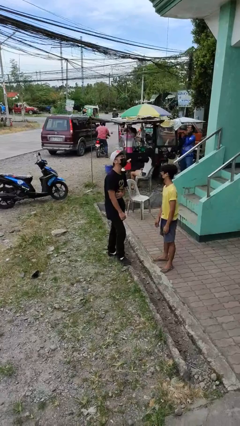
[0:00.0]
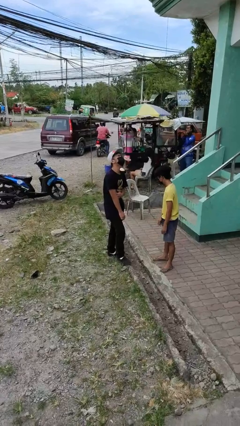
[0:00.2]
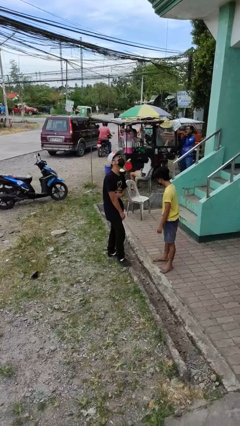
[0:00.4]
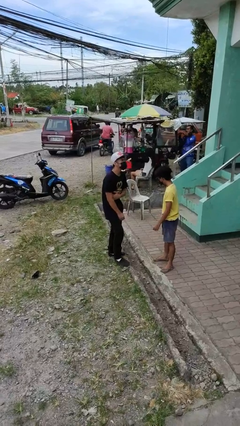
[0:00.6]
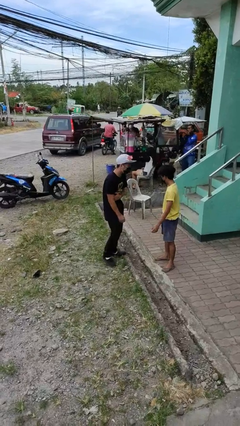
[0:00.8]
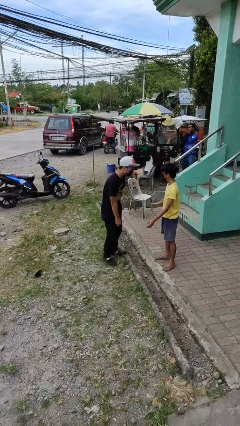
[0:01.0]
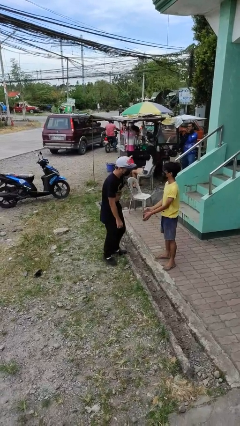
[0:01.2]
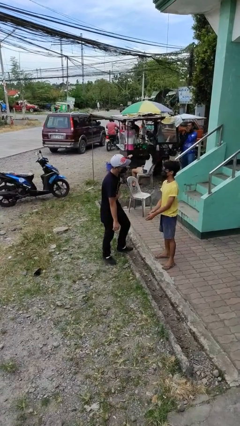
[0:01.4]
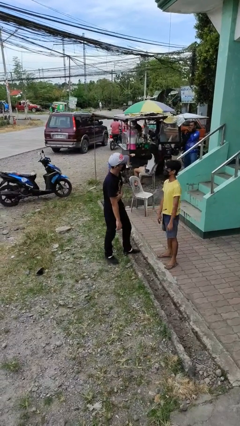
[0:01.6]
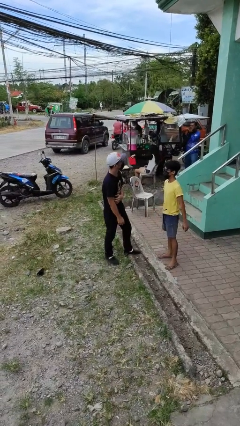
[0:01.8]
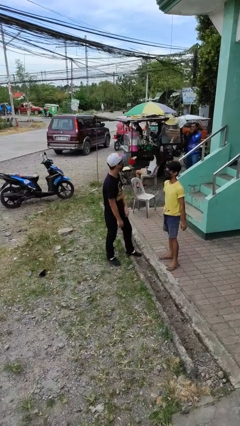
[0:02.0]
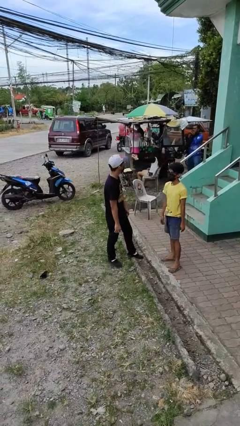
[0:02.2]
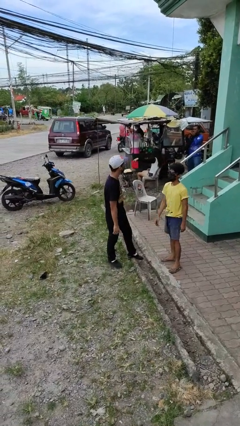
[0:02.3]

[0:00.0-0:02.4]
person laughs with person

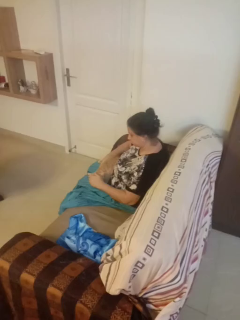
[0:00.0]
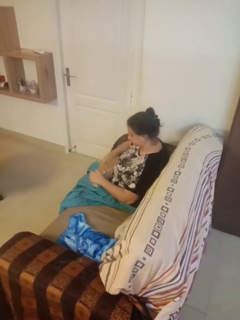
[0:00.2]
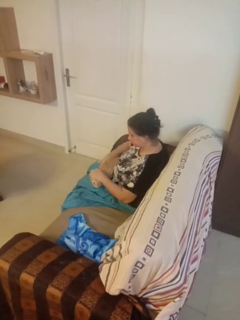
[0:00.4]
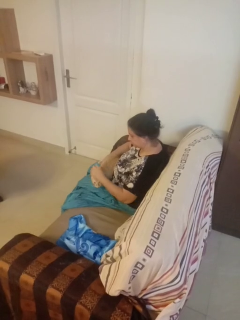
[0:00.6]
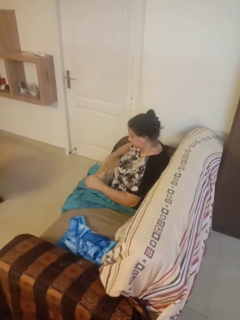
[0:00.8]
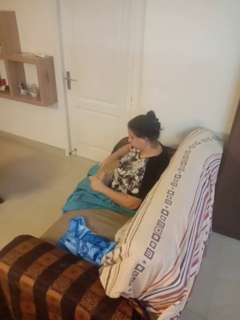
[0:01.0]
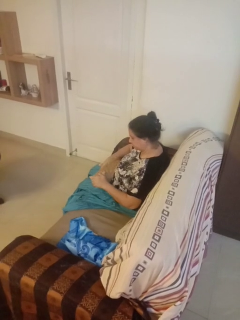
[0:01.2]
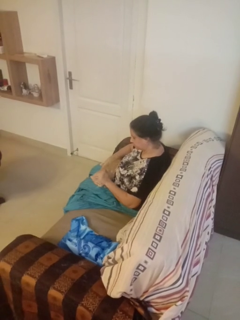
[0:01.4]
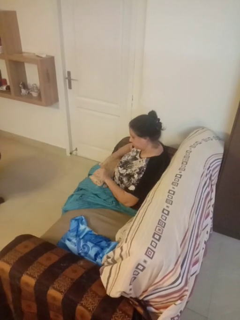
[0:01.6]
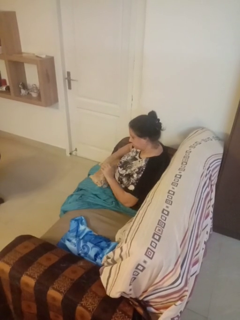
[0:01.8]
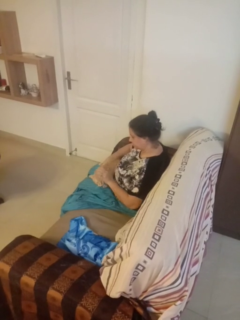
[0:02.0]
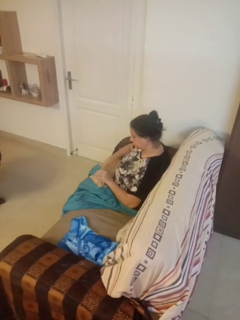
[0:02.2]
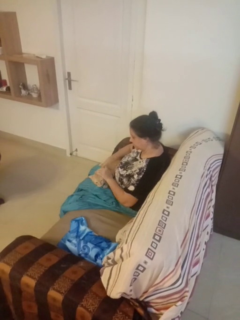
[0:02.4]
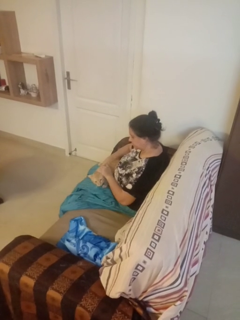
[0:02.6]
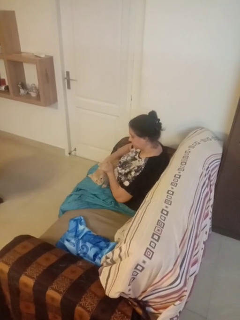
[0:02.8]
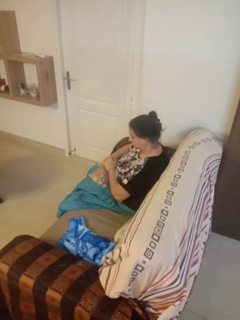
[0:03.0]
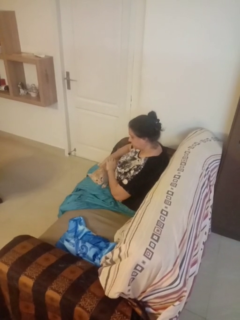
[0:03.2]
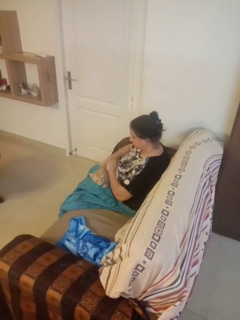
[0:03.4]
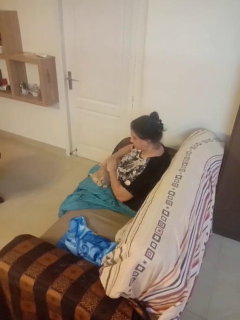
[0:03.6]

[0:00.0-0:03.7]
person pets cat

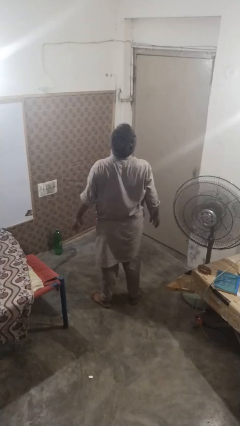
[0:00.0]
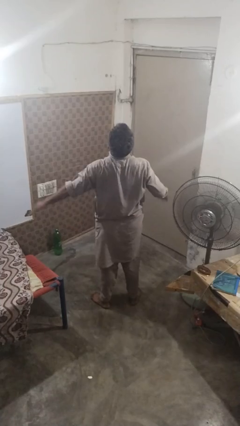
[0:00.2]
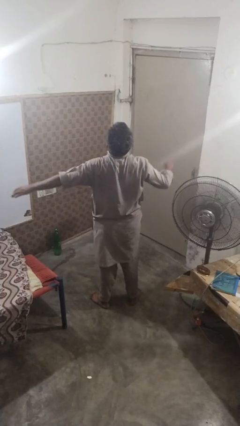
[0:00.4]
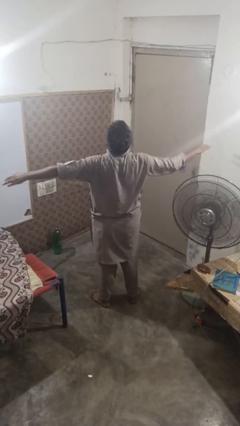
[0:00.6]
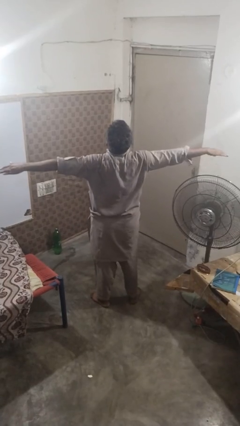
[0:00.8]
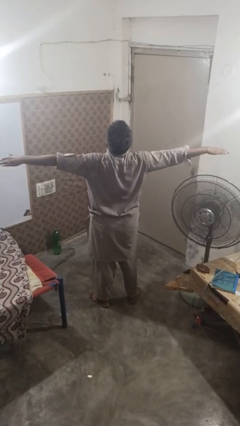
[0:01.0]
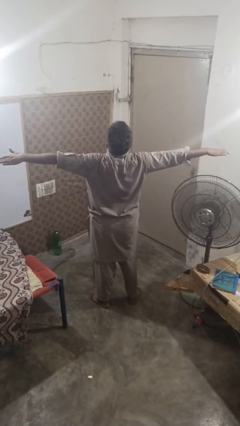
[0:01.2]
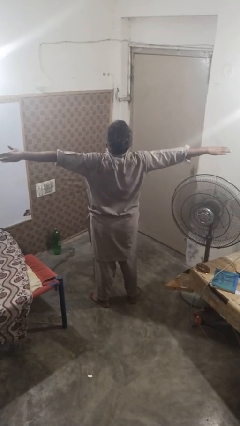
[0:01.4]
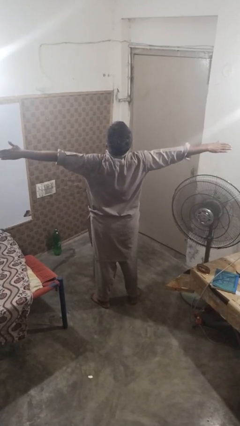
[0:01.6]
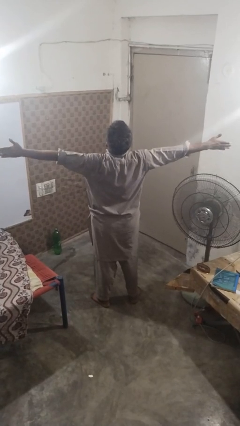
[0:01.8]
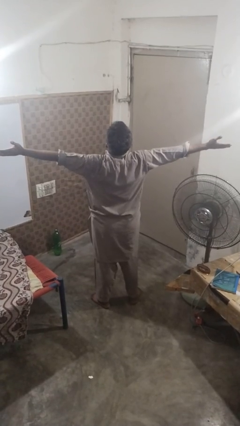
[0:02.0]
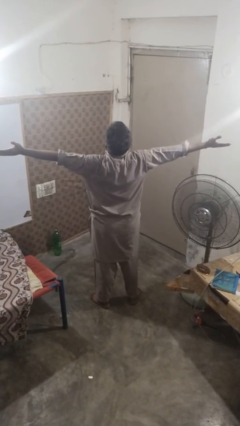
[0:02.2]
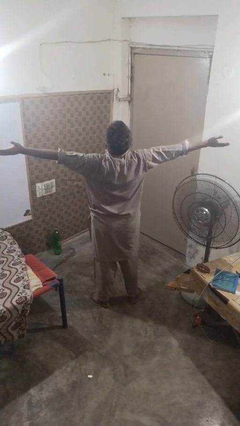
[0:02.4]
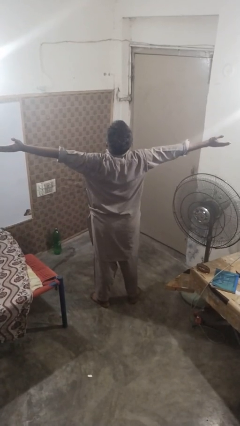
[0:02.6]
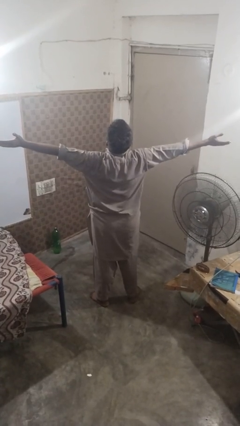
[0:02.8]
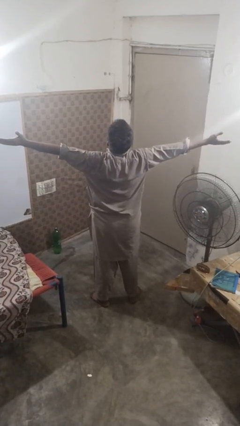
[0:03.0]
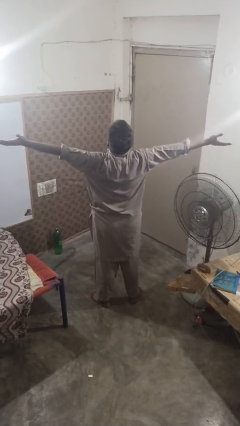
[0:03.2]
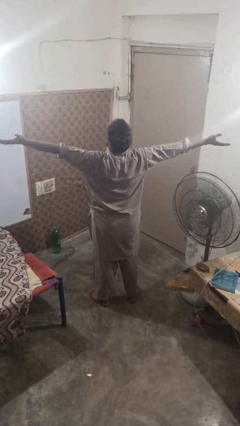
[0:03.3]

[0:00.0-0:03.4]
person stretches arms to side

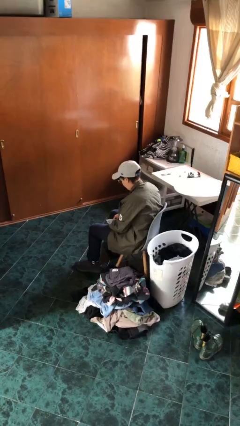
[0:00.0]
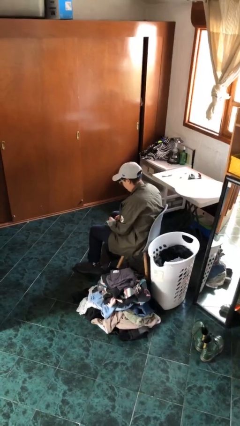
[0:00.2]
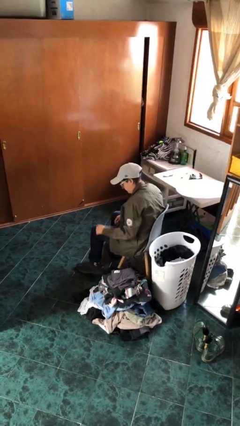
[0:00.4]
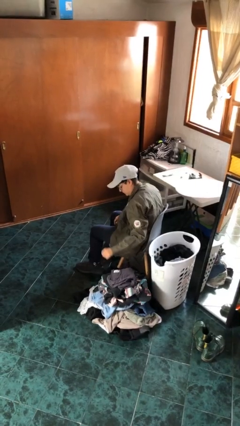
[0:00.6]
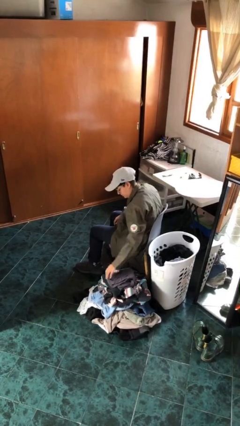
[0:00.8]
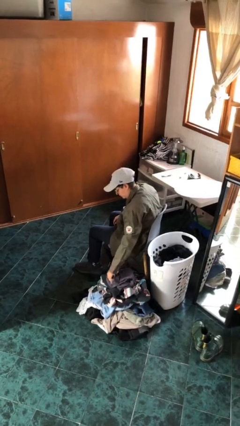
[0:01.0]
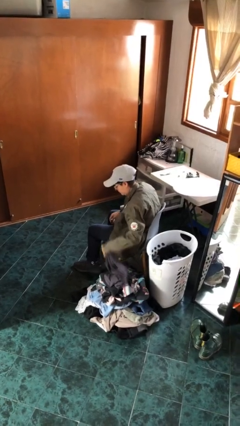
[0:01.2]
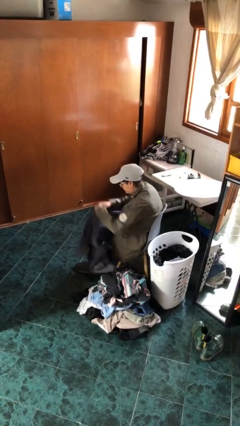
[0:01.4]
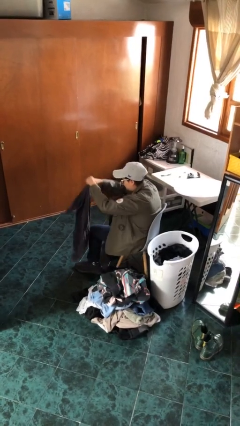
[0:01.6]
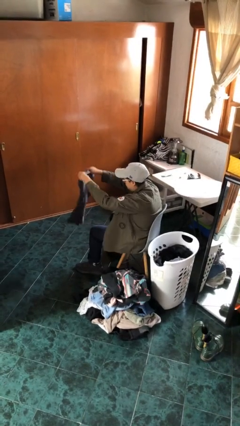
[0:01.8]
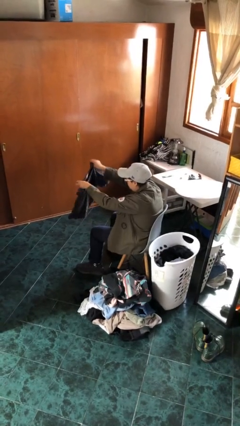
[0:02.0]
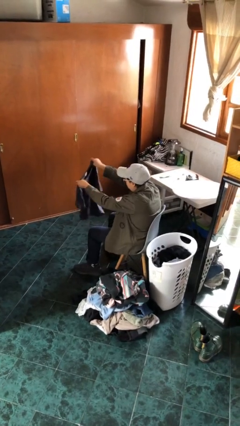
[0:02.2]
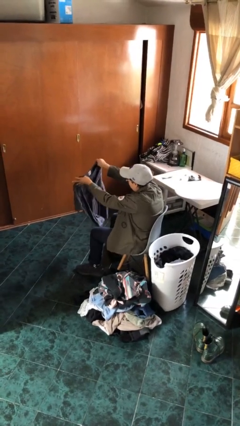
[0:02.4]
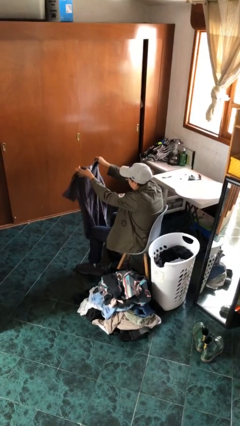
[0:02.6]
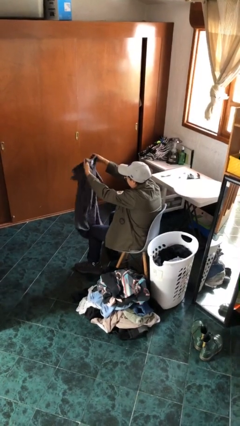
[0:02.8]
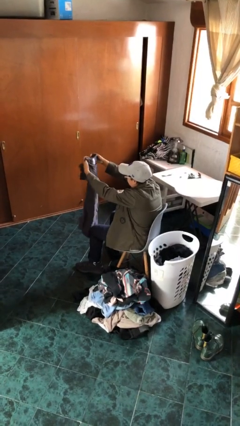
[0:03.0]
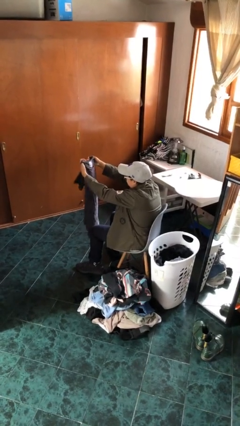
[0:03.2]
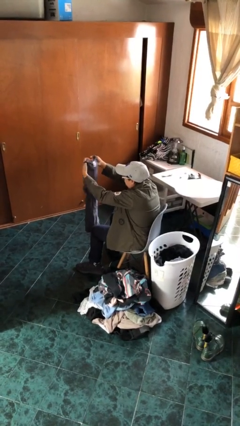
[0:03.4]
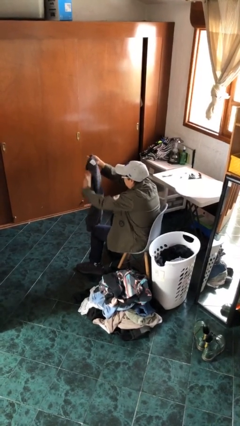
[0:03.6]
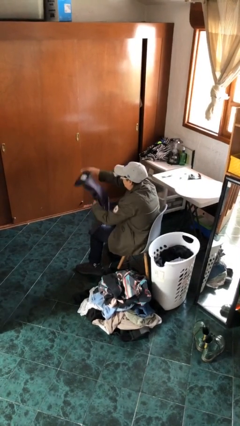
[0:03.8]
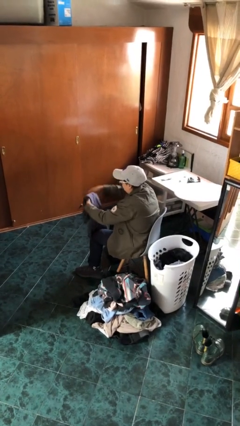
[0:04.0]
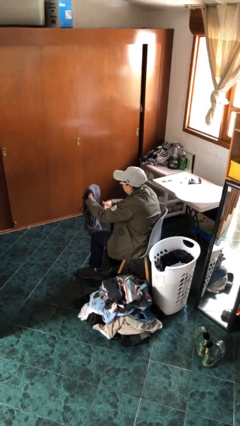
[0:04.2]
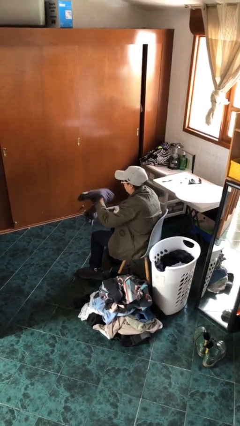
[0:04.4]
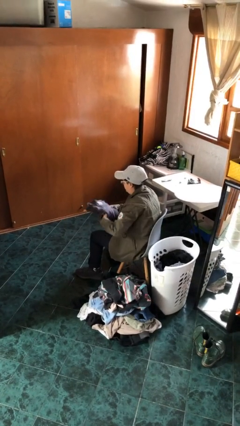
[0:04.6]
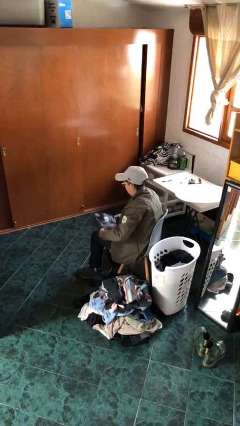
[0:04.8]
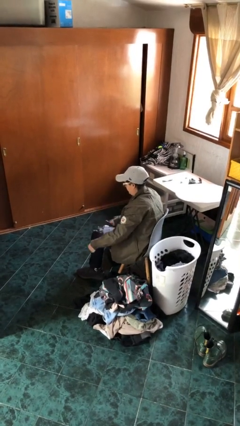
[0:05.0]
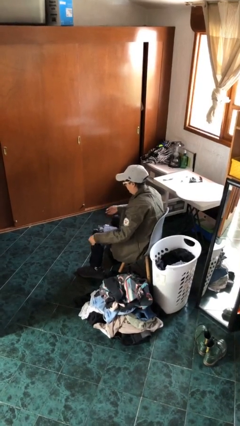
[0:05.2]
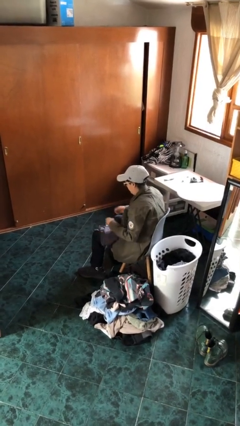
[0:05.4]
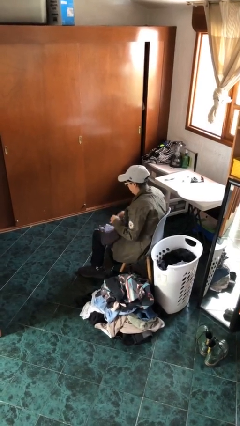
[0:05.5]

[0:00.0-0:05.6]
person folds shirt

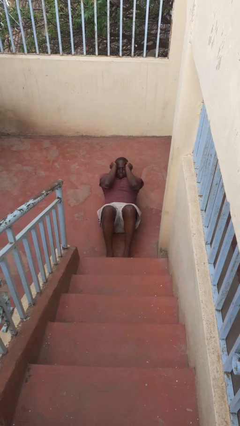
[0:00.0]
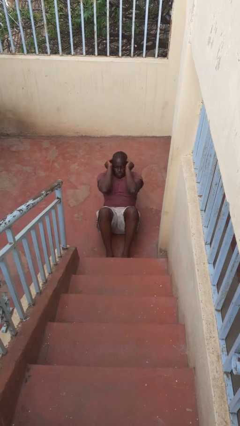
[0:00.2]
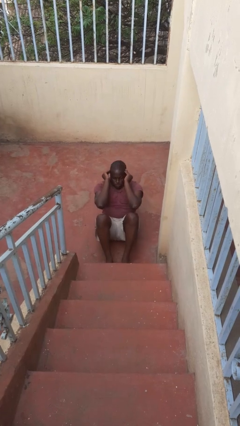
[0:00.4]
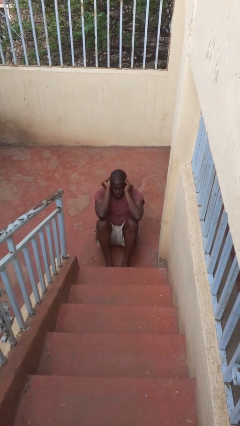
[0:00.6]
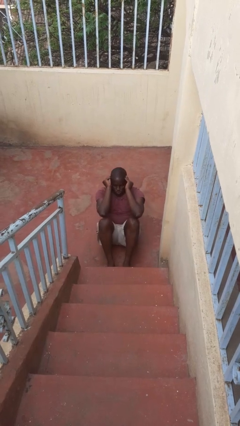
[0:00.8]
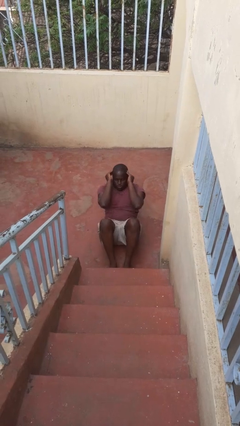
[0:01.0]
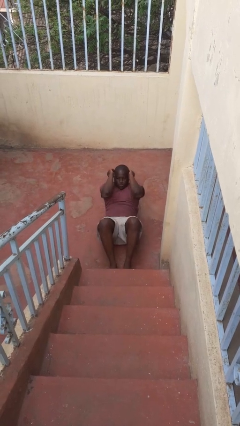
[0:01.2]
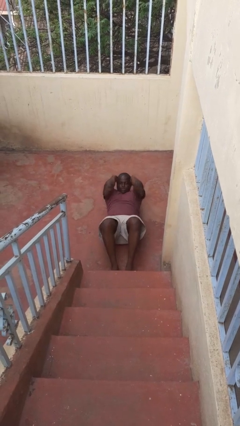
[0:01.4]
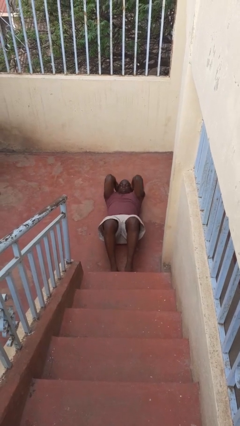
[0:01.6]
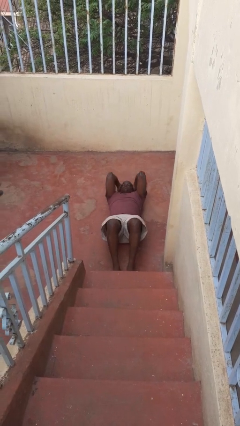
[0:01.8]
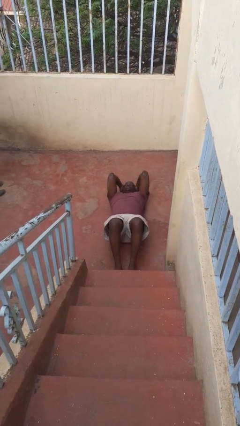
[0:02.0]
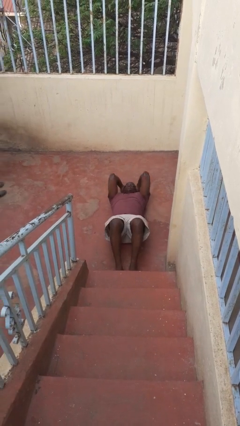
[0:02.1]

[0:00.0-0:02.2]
person exercises with situp

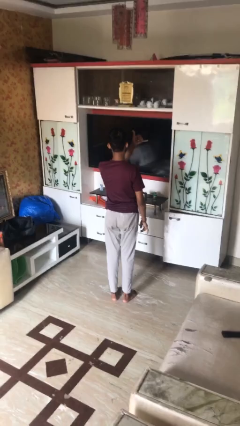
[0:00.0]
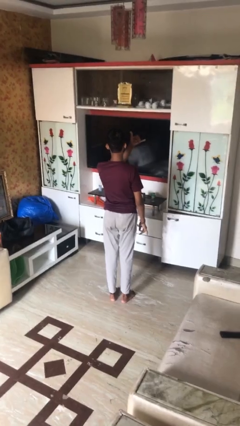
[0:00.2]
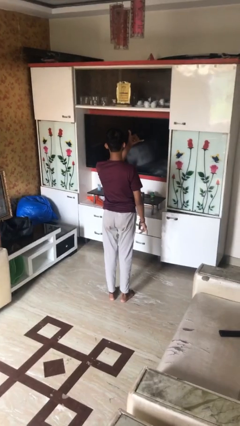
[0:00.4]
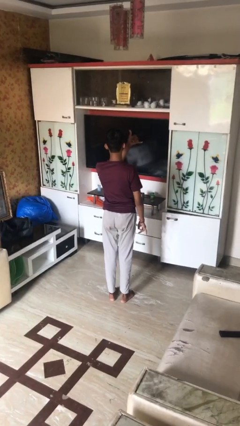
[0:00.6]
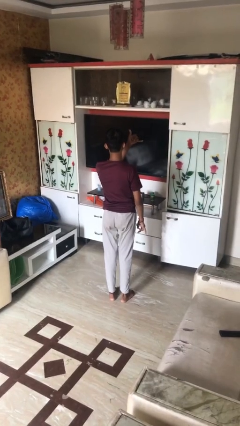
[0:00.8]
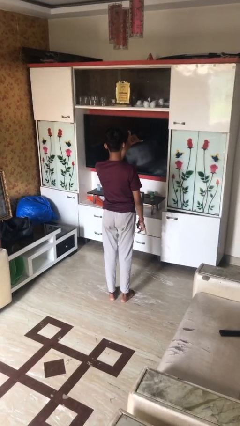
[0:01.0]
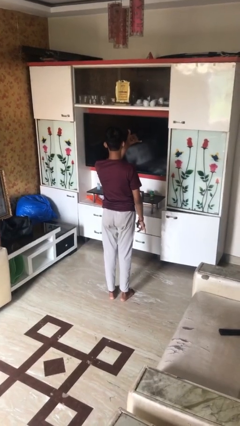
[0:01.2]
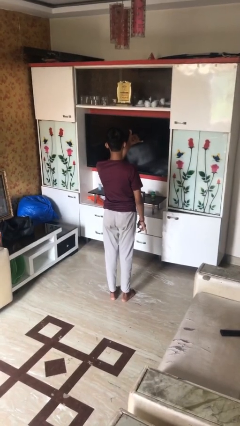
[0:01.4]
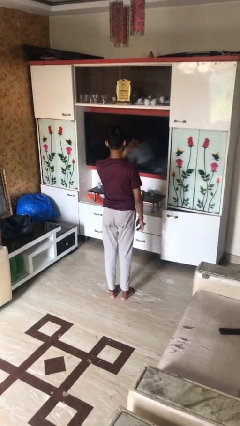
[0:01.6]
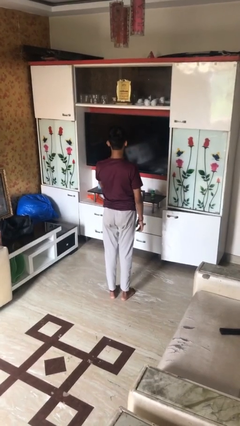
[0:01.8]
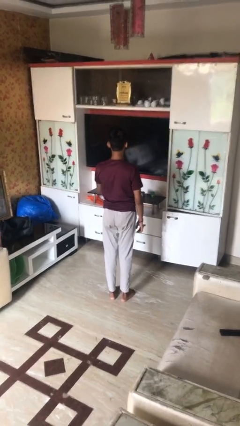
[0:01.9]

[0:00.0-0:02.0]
person gestures hang loose
